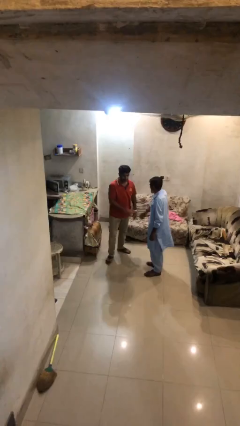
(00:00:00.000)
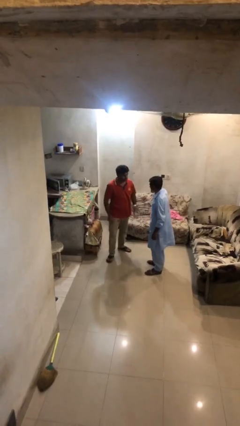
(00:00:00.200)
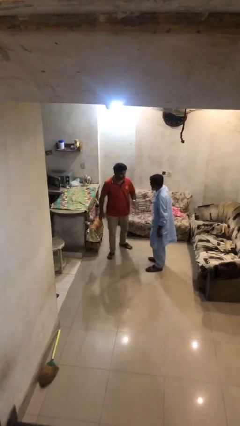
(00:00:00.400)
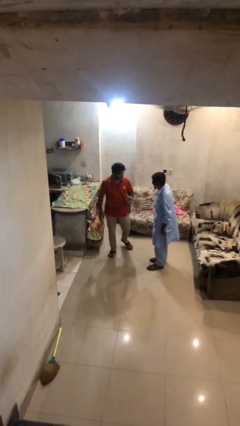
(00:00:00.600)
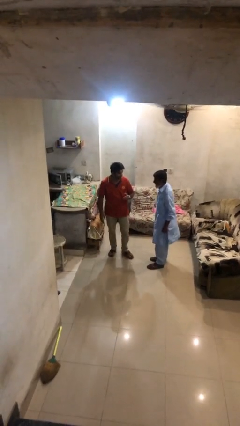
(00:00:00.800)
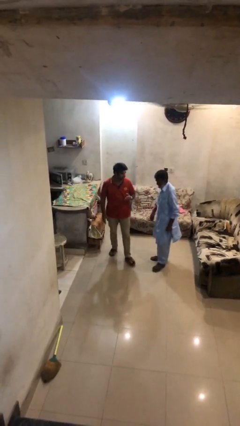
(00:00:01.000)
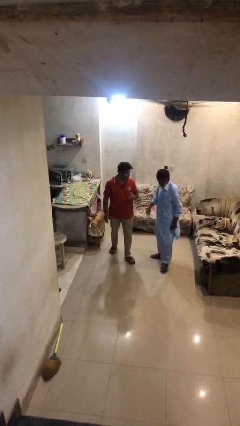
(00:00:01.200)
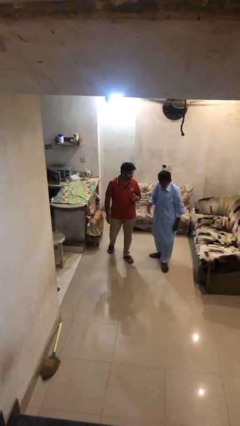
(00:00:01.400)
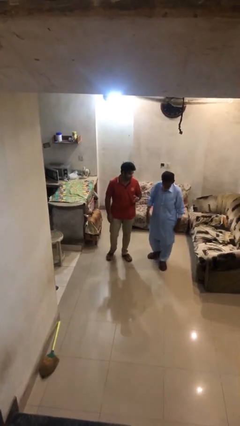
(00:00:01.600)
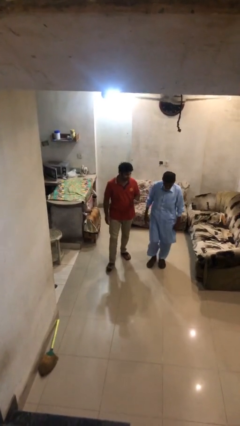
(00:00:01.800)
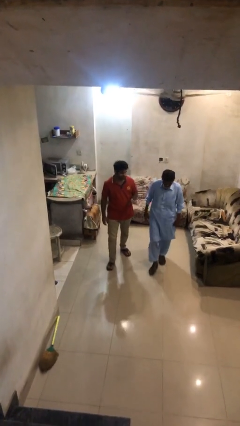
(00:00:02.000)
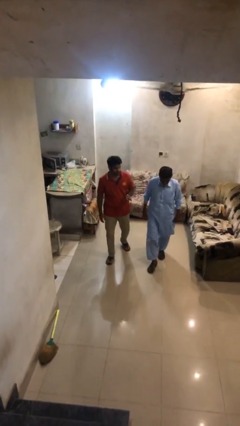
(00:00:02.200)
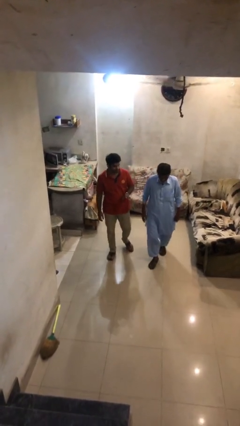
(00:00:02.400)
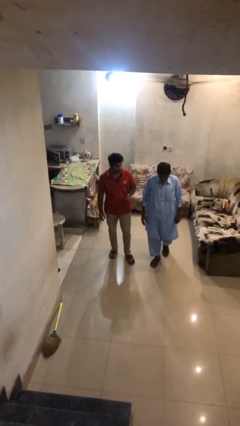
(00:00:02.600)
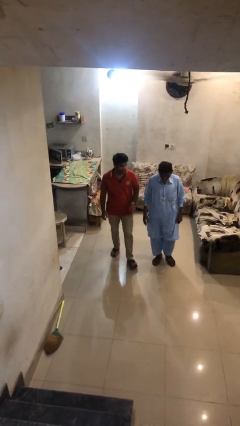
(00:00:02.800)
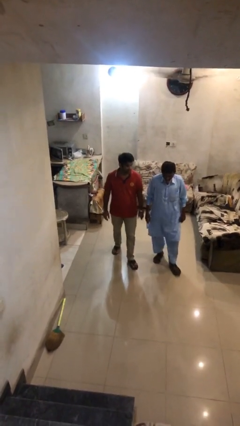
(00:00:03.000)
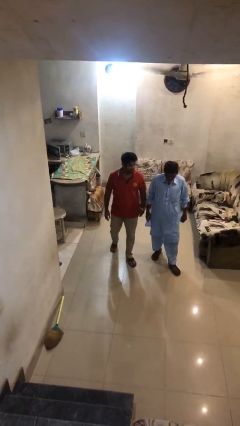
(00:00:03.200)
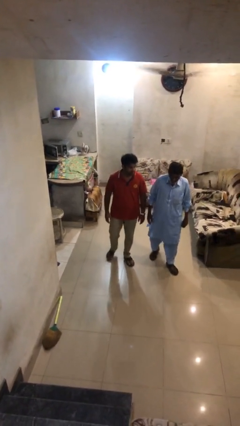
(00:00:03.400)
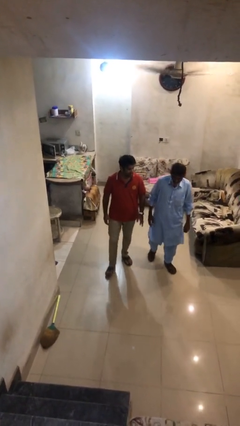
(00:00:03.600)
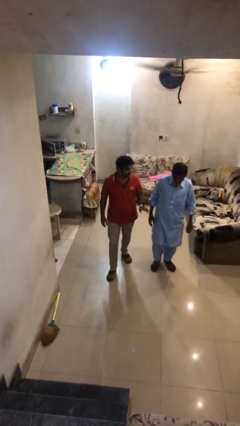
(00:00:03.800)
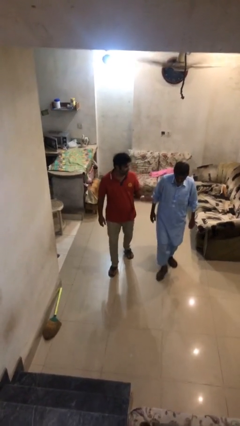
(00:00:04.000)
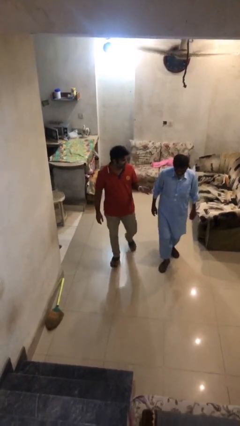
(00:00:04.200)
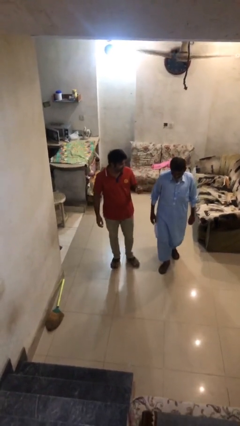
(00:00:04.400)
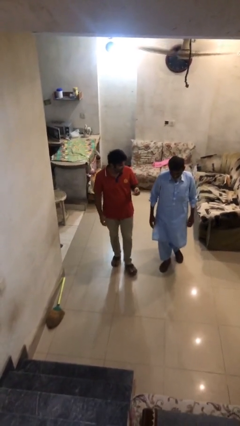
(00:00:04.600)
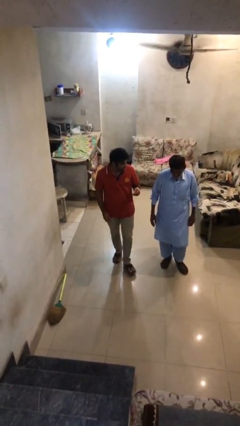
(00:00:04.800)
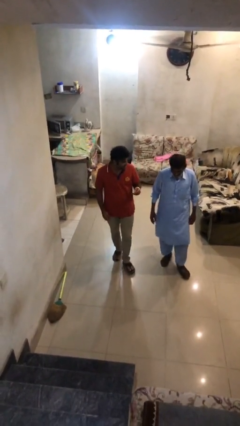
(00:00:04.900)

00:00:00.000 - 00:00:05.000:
person talks to person

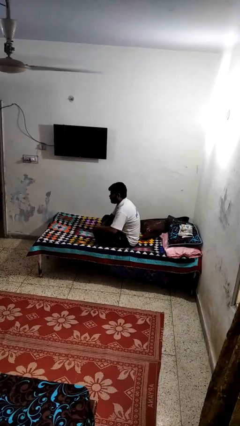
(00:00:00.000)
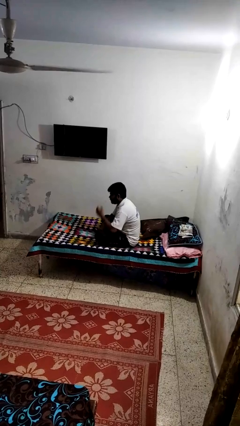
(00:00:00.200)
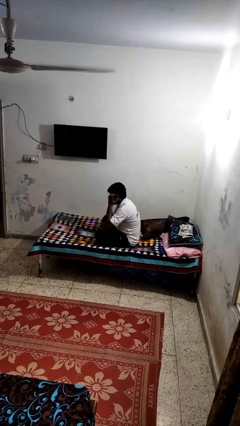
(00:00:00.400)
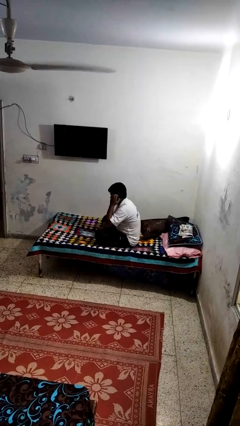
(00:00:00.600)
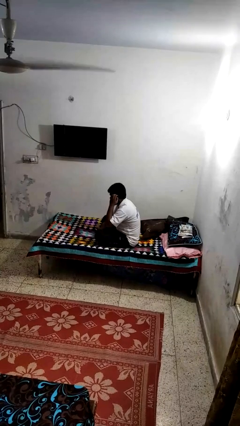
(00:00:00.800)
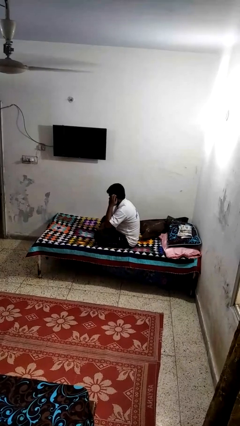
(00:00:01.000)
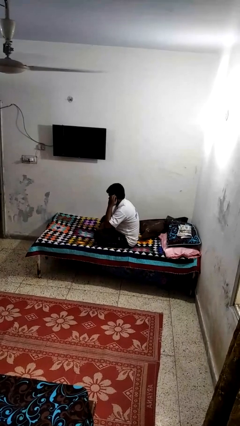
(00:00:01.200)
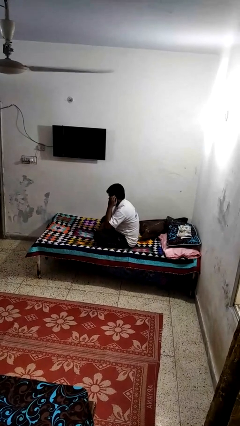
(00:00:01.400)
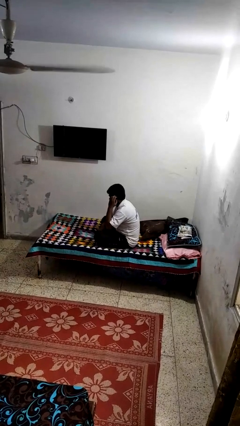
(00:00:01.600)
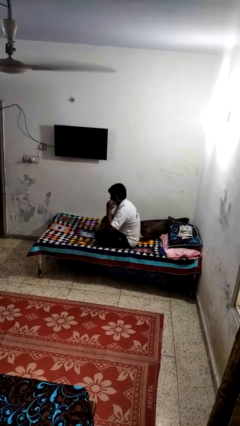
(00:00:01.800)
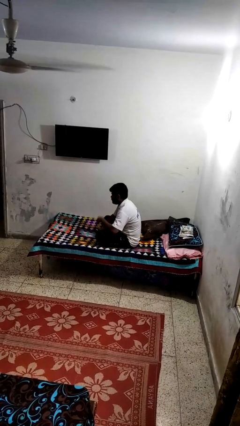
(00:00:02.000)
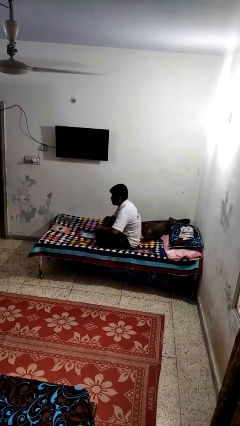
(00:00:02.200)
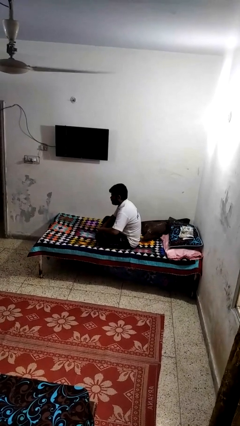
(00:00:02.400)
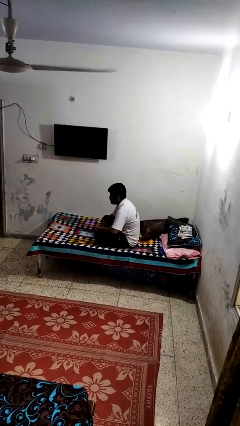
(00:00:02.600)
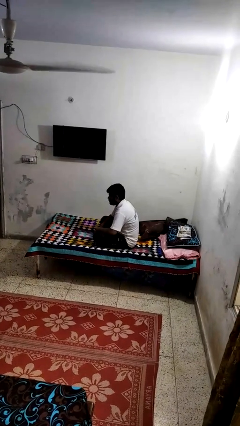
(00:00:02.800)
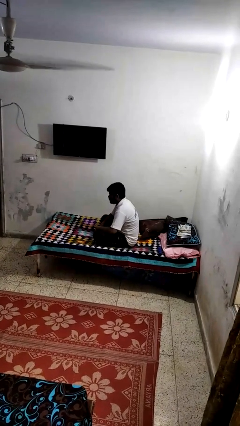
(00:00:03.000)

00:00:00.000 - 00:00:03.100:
person scratches face

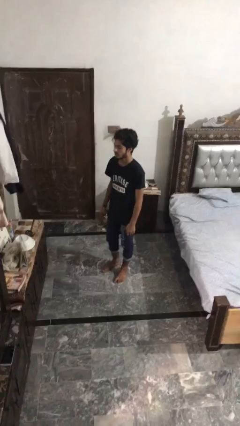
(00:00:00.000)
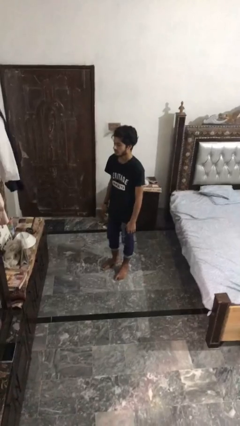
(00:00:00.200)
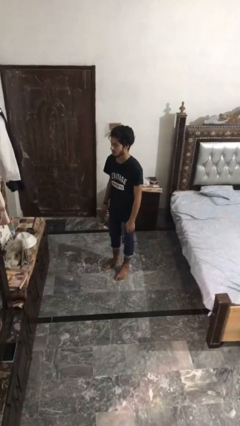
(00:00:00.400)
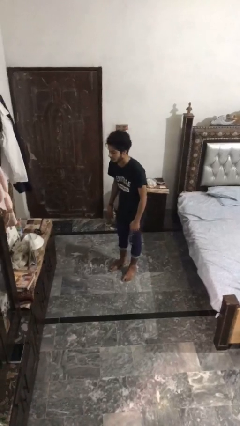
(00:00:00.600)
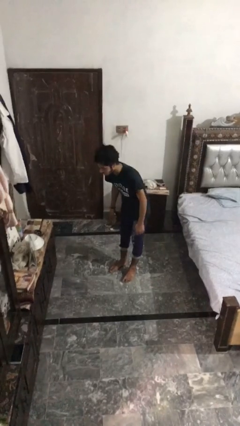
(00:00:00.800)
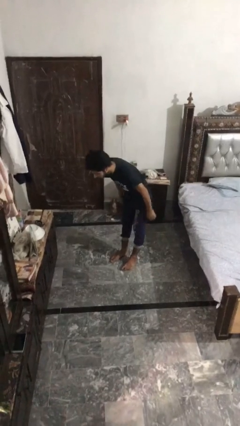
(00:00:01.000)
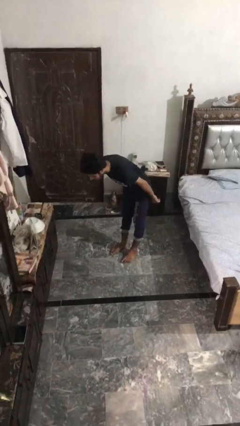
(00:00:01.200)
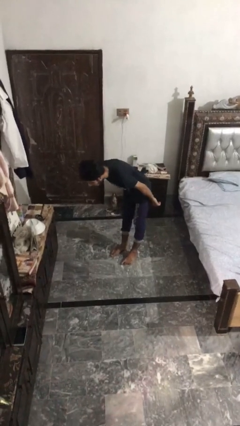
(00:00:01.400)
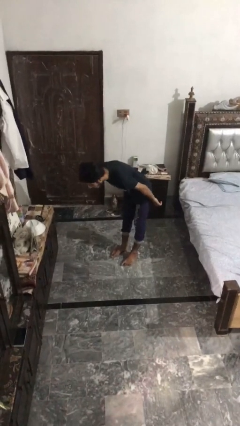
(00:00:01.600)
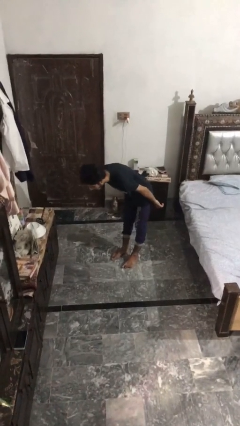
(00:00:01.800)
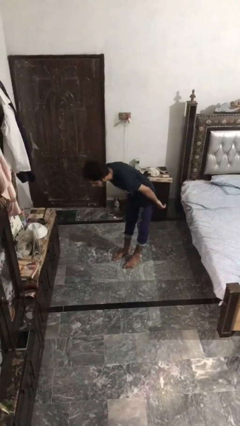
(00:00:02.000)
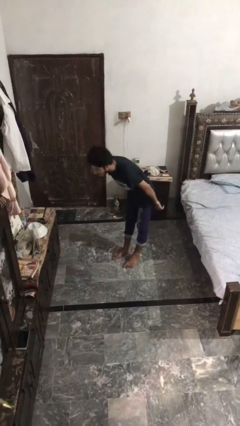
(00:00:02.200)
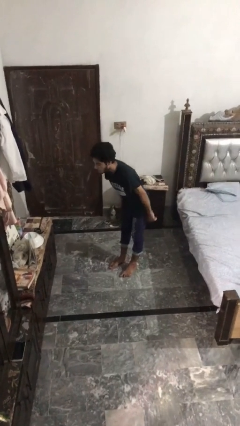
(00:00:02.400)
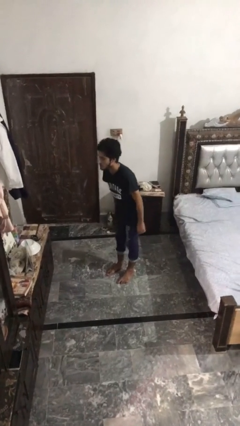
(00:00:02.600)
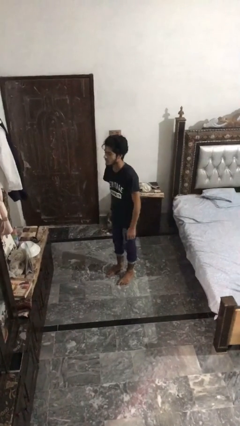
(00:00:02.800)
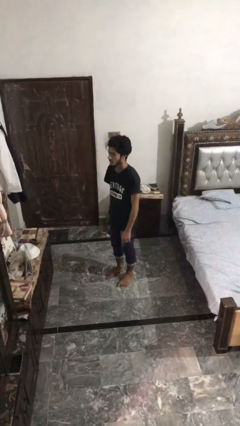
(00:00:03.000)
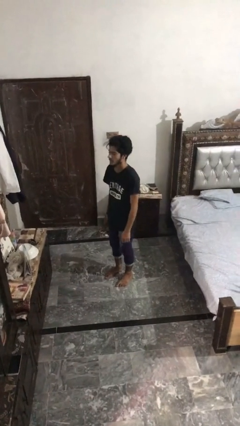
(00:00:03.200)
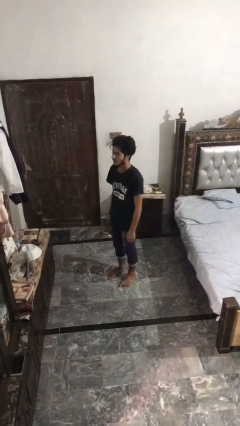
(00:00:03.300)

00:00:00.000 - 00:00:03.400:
person bows

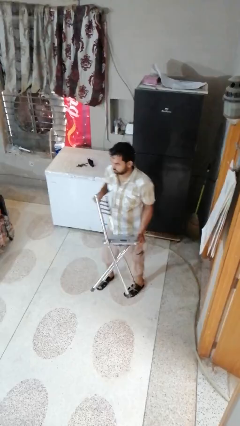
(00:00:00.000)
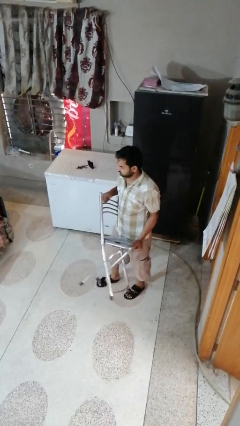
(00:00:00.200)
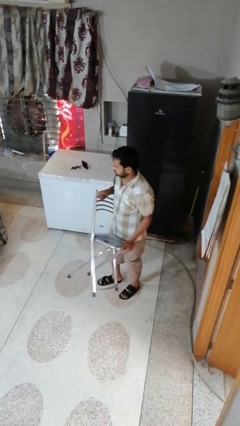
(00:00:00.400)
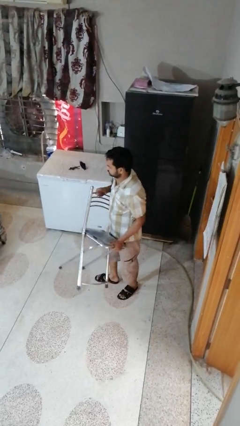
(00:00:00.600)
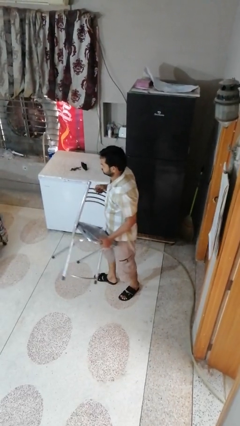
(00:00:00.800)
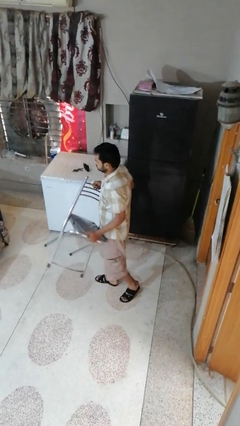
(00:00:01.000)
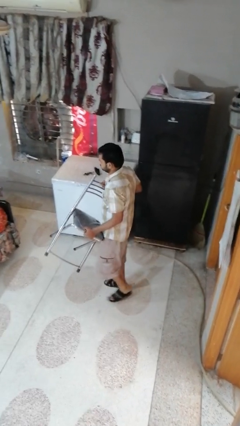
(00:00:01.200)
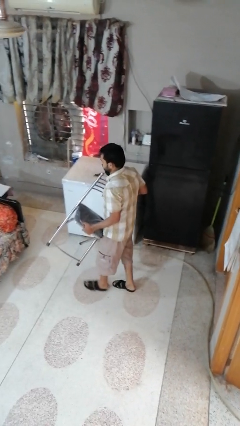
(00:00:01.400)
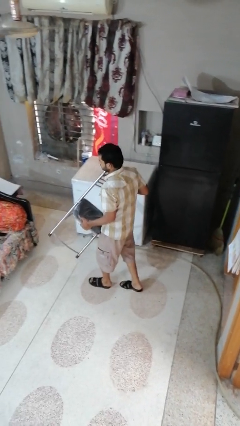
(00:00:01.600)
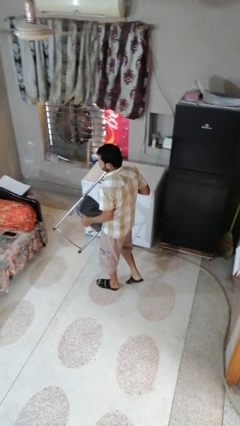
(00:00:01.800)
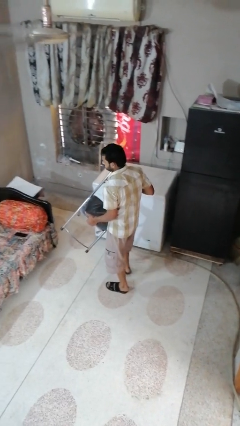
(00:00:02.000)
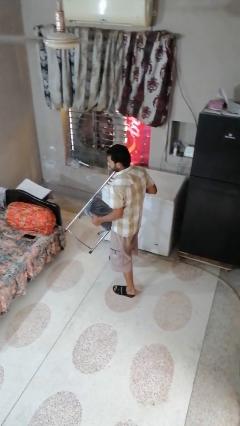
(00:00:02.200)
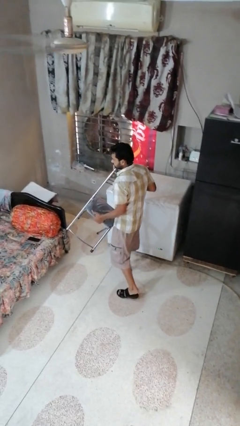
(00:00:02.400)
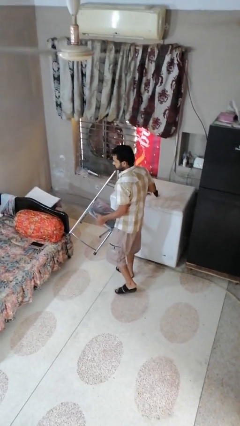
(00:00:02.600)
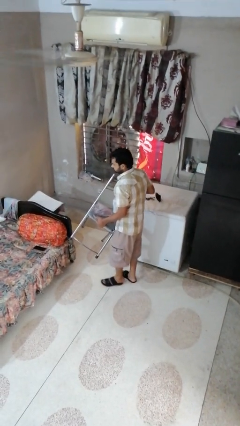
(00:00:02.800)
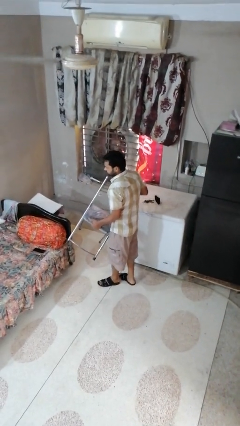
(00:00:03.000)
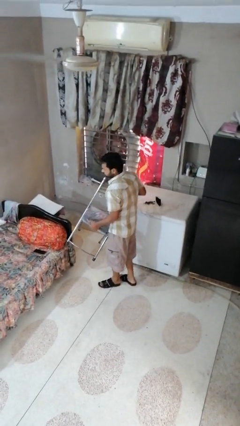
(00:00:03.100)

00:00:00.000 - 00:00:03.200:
person carries furniture

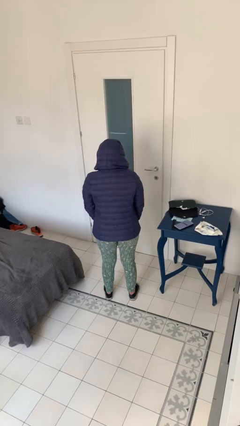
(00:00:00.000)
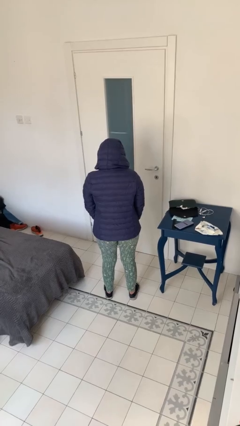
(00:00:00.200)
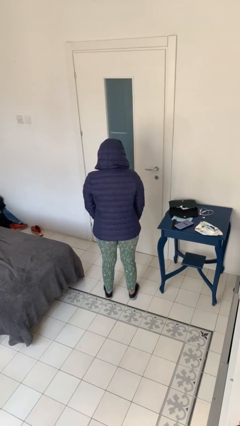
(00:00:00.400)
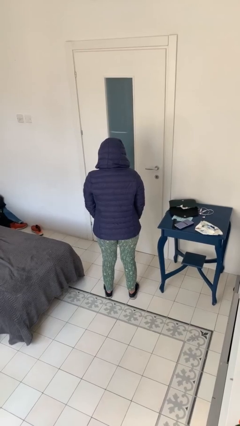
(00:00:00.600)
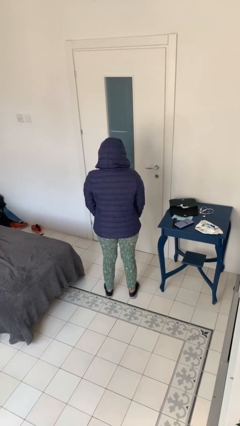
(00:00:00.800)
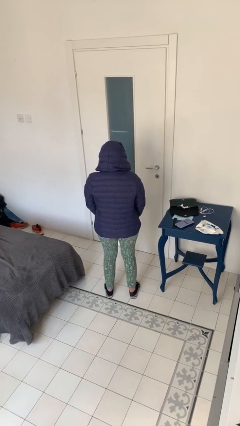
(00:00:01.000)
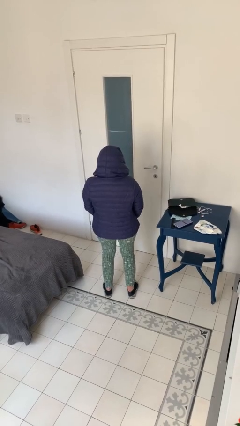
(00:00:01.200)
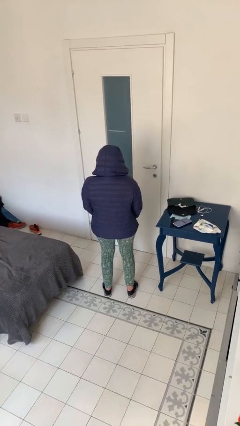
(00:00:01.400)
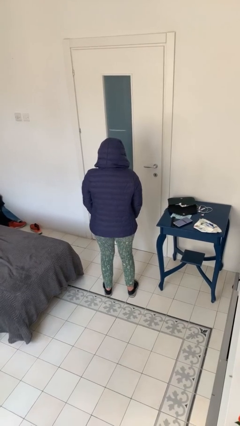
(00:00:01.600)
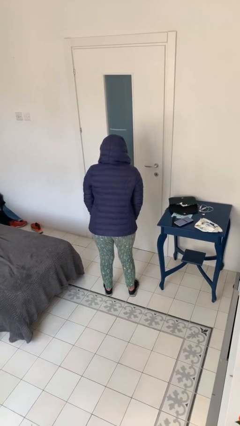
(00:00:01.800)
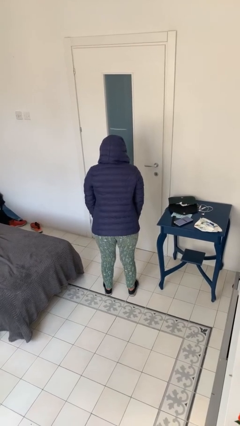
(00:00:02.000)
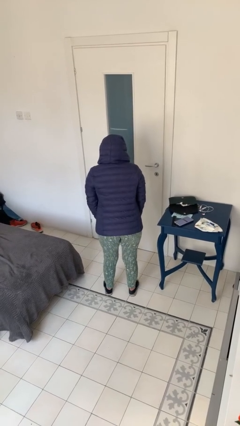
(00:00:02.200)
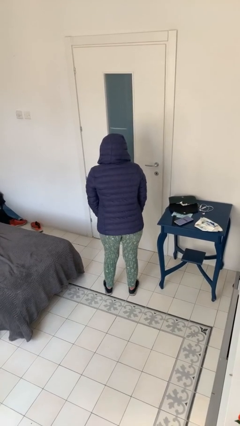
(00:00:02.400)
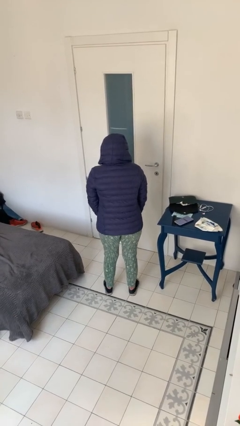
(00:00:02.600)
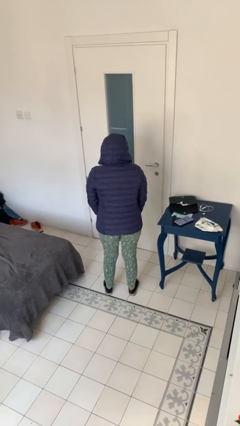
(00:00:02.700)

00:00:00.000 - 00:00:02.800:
person wiggles hips
